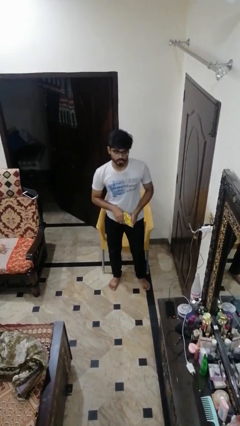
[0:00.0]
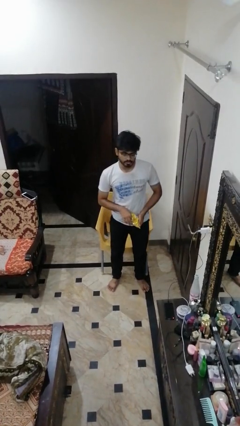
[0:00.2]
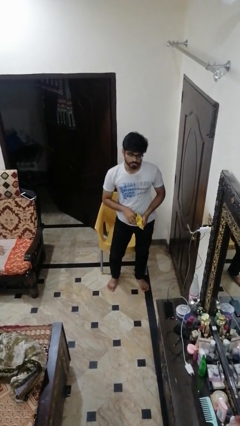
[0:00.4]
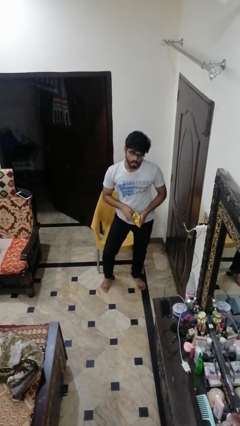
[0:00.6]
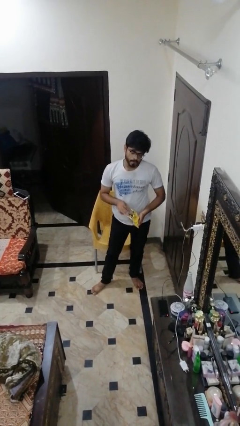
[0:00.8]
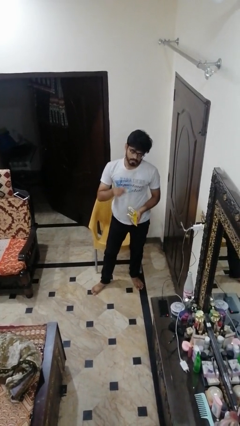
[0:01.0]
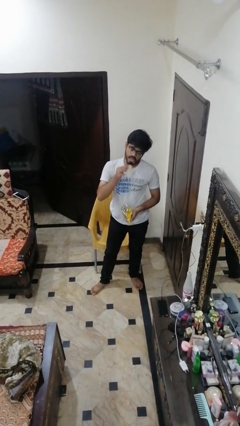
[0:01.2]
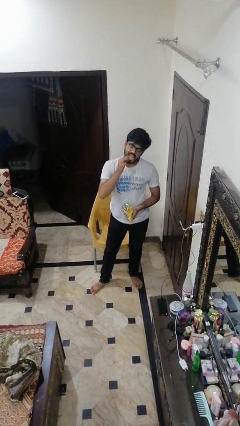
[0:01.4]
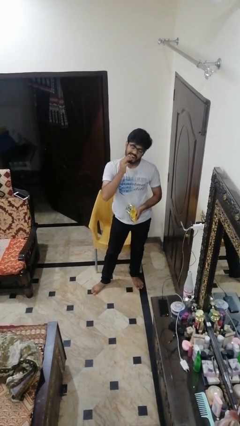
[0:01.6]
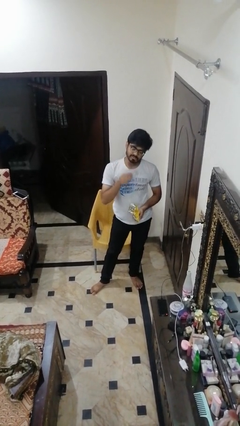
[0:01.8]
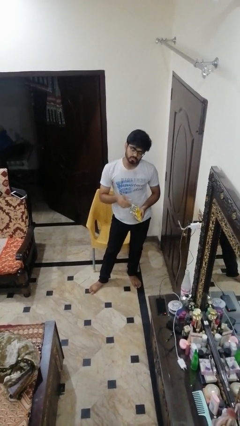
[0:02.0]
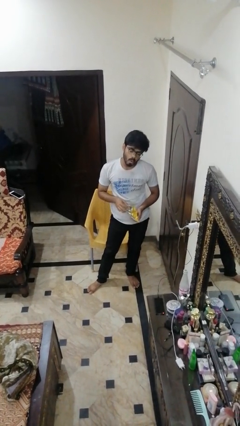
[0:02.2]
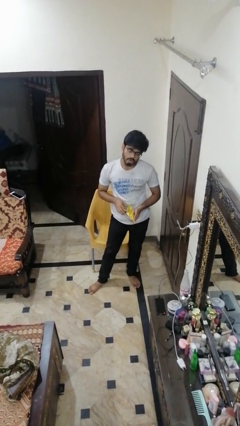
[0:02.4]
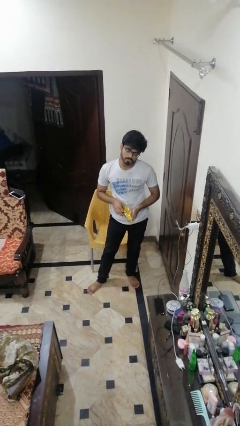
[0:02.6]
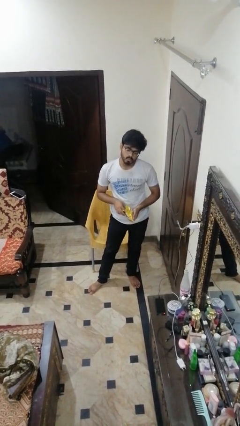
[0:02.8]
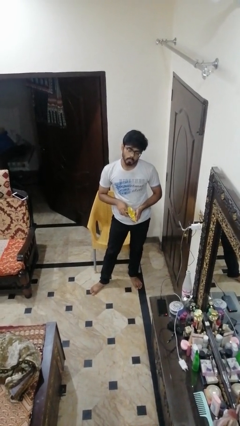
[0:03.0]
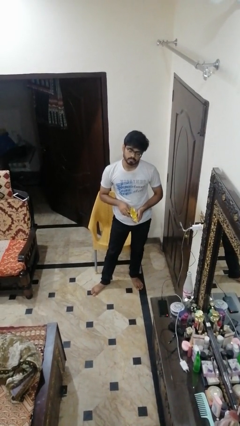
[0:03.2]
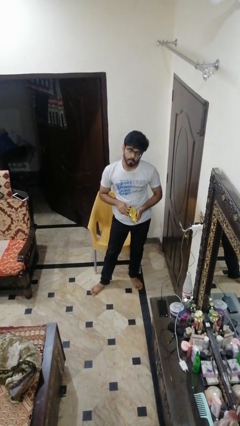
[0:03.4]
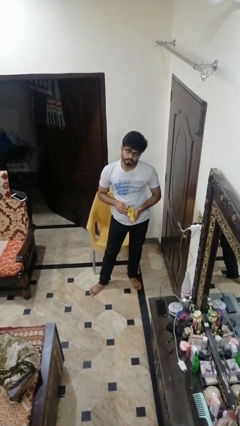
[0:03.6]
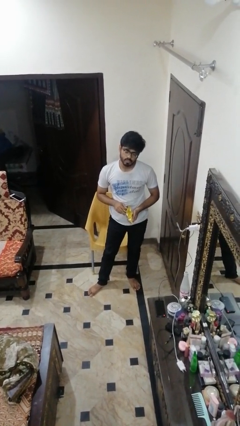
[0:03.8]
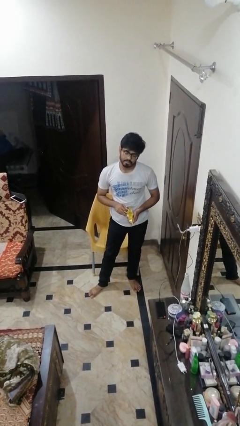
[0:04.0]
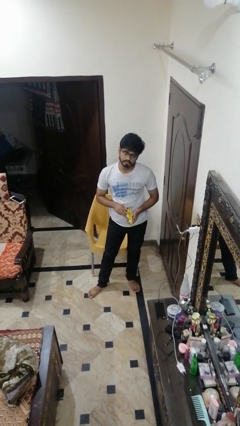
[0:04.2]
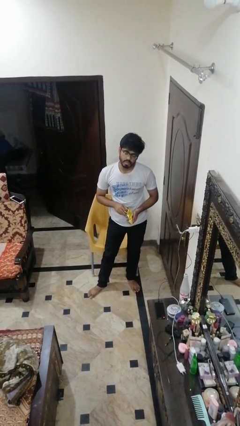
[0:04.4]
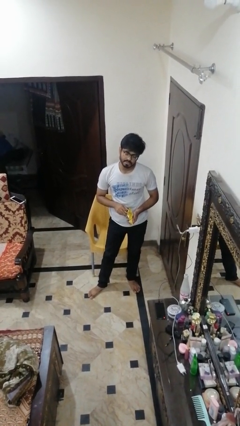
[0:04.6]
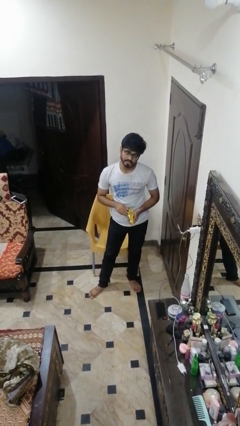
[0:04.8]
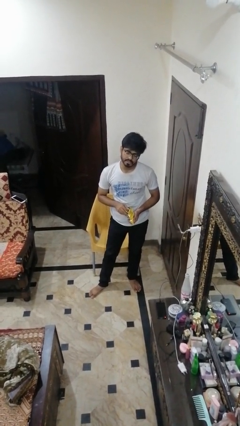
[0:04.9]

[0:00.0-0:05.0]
person eats snack from bag

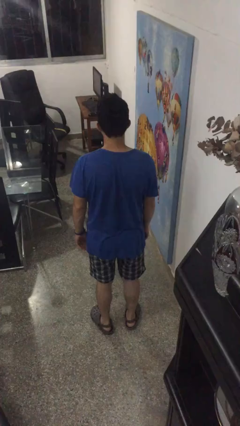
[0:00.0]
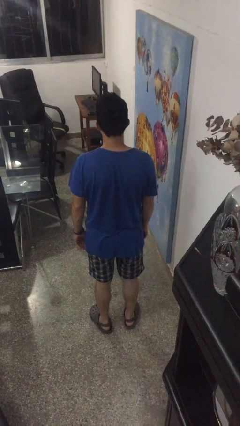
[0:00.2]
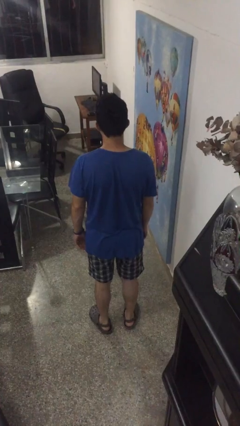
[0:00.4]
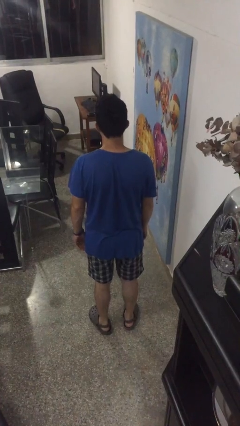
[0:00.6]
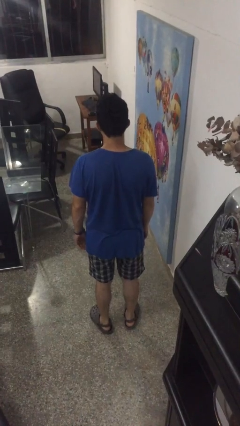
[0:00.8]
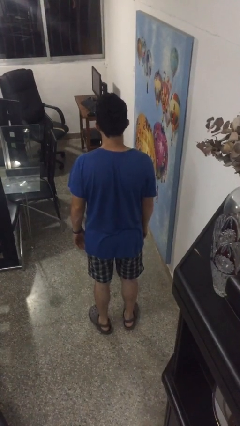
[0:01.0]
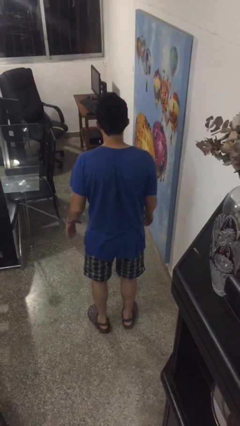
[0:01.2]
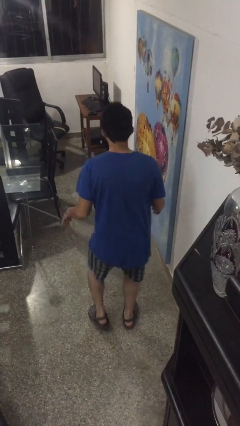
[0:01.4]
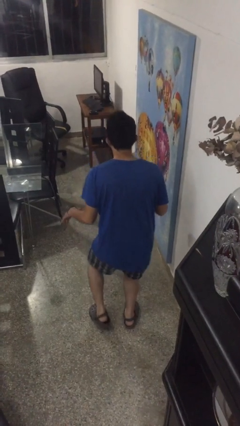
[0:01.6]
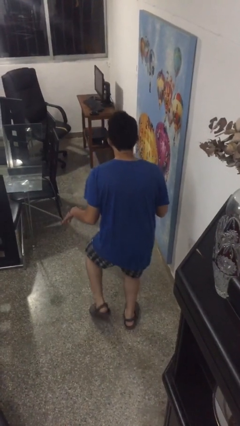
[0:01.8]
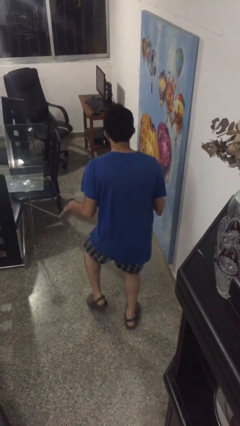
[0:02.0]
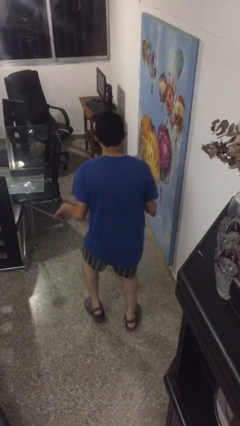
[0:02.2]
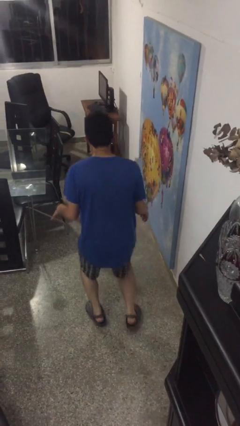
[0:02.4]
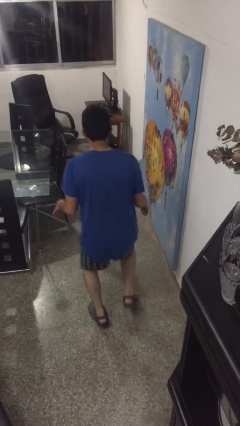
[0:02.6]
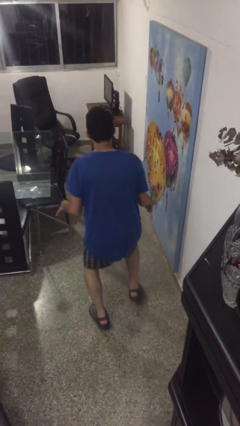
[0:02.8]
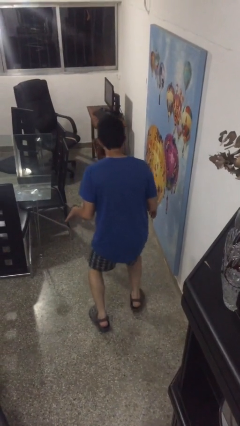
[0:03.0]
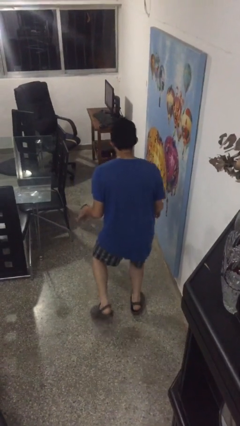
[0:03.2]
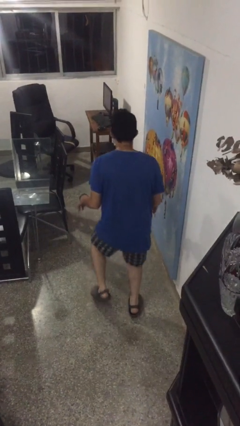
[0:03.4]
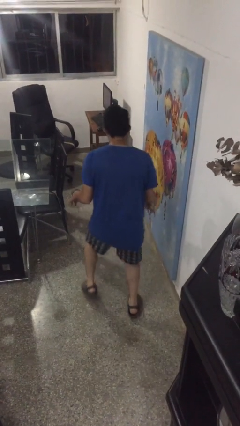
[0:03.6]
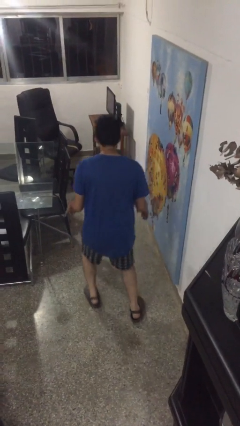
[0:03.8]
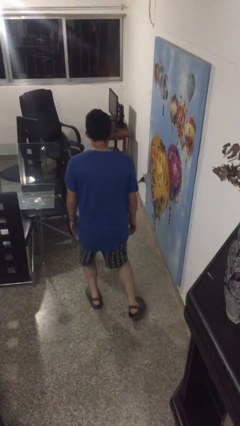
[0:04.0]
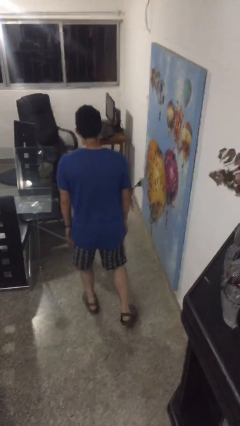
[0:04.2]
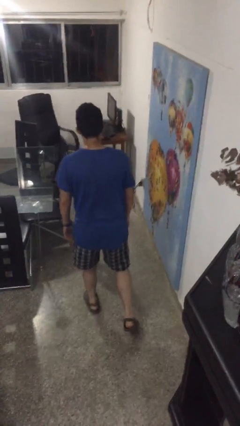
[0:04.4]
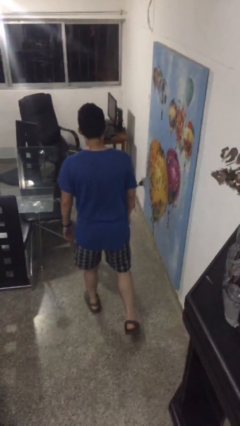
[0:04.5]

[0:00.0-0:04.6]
person walks tiptoe

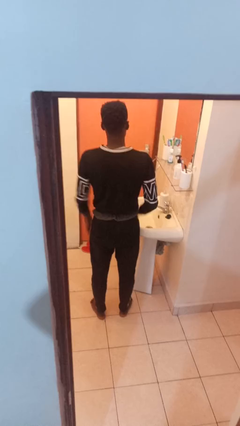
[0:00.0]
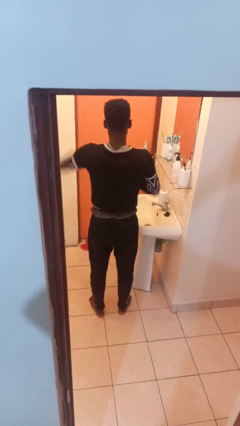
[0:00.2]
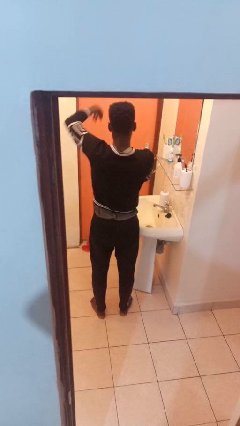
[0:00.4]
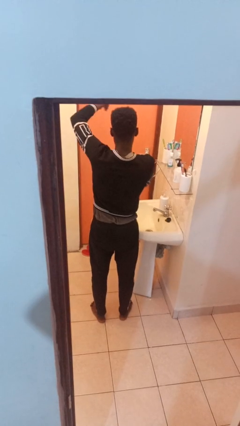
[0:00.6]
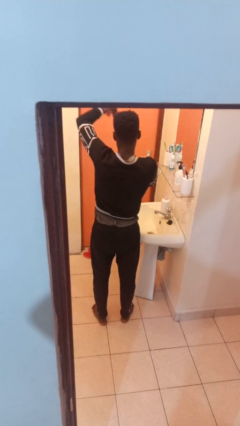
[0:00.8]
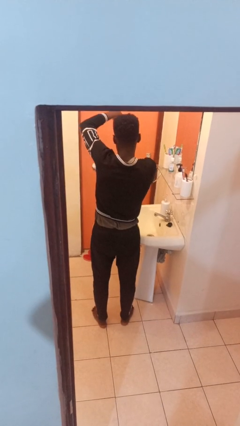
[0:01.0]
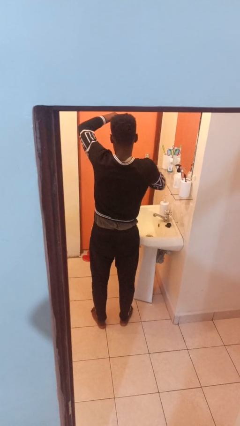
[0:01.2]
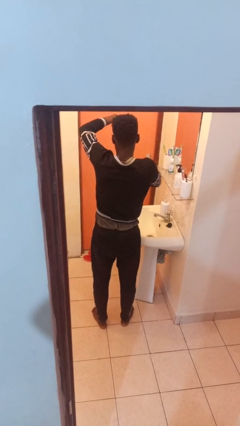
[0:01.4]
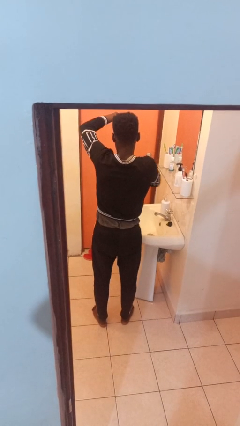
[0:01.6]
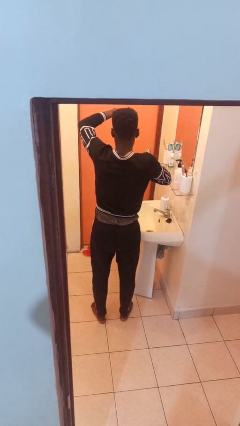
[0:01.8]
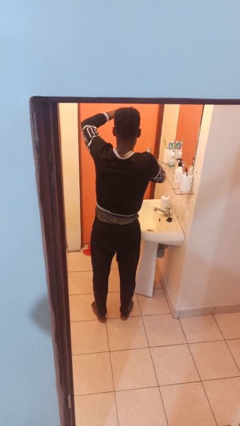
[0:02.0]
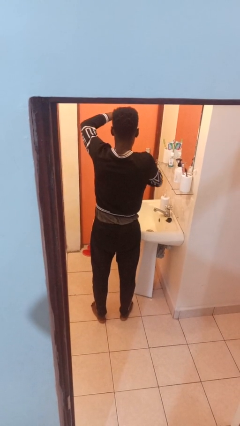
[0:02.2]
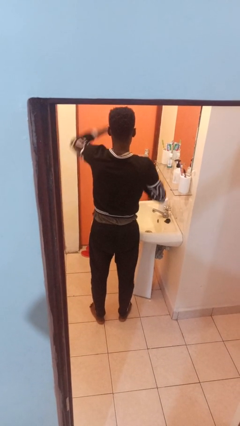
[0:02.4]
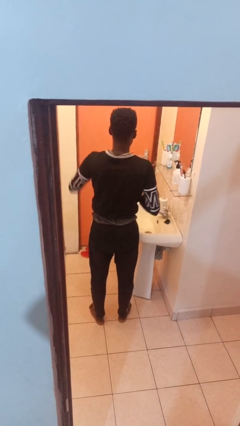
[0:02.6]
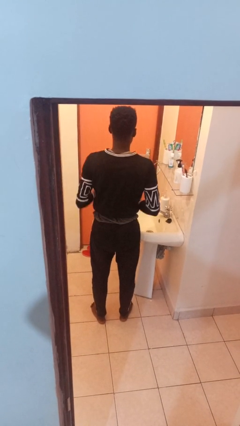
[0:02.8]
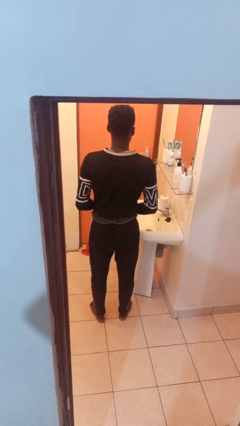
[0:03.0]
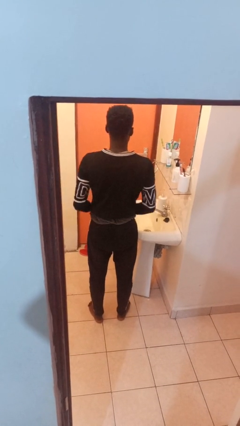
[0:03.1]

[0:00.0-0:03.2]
person applies deodorant

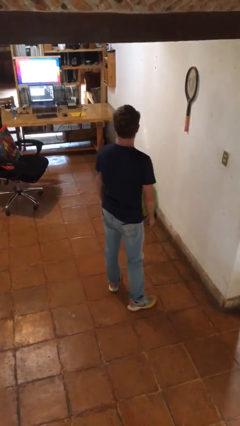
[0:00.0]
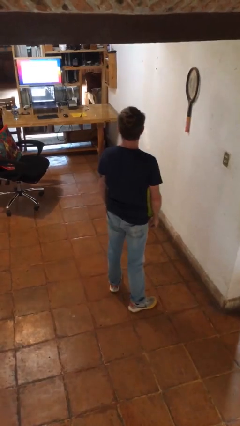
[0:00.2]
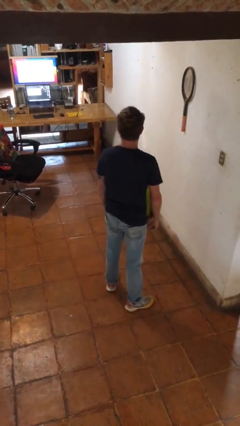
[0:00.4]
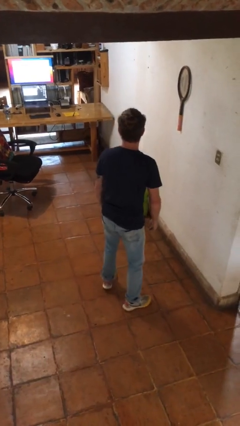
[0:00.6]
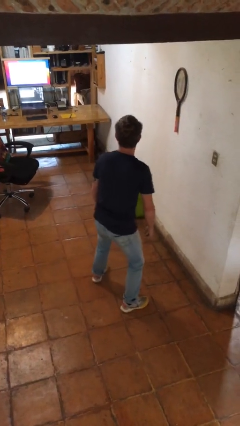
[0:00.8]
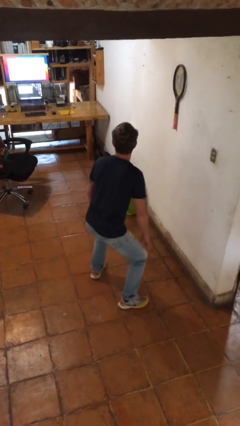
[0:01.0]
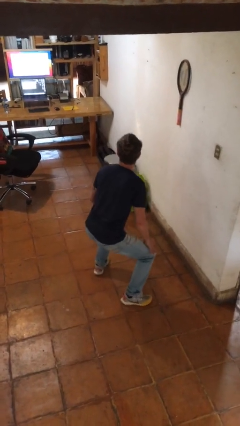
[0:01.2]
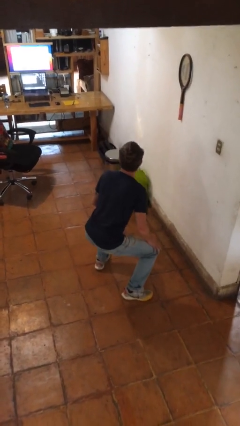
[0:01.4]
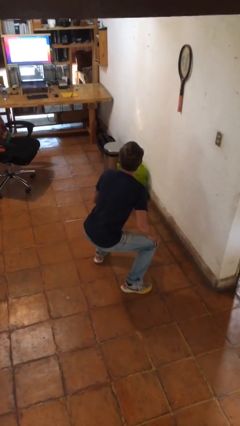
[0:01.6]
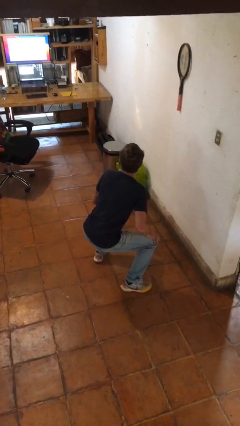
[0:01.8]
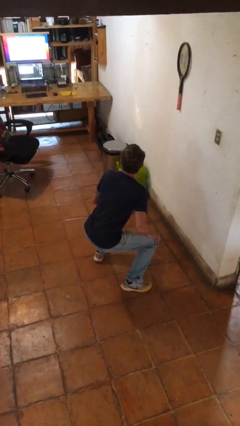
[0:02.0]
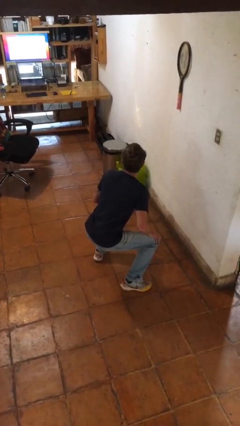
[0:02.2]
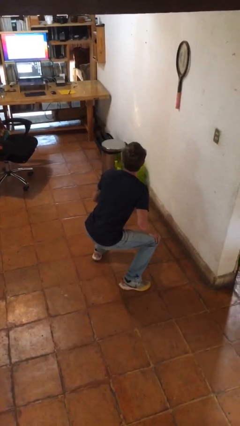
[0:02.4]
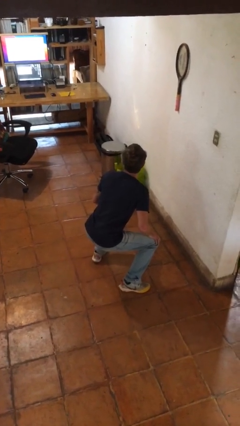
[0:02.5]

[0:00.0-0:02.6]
person squats

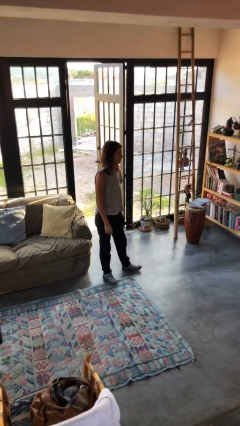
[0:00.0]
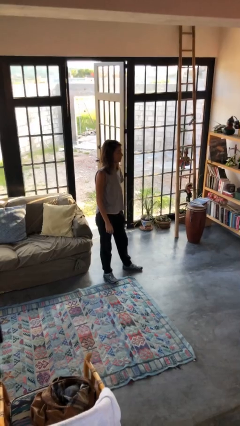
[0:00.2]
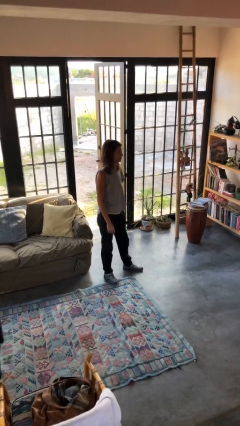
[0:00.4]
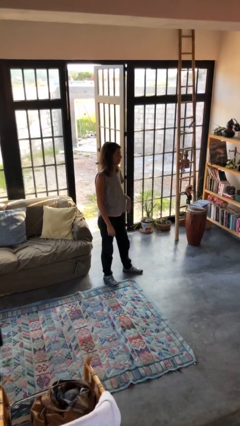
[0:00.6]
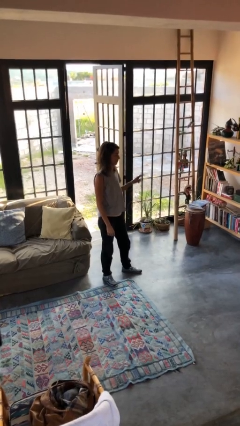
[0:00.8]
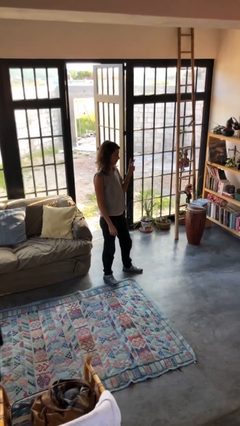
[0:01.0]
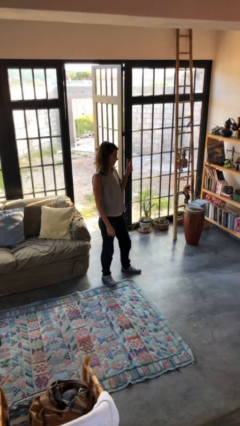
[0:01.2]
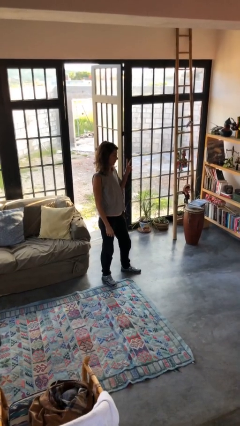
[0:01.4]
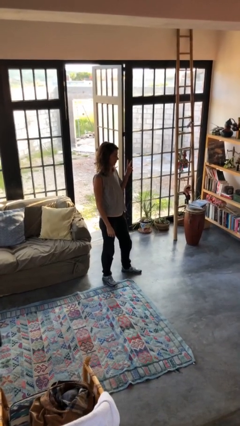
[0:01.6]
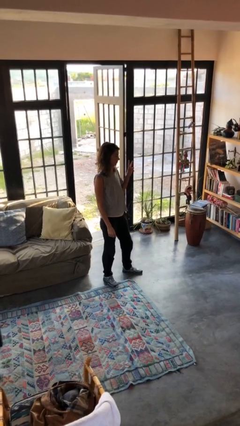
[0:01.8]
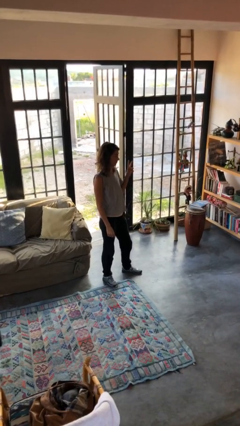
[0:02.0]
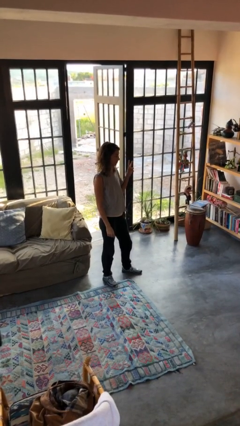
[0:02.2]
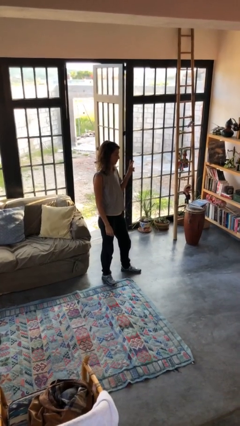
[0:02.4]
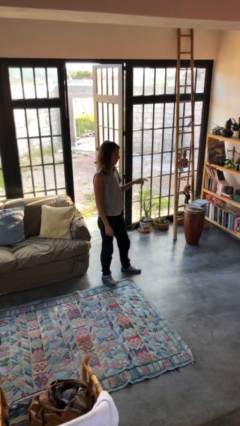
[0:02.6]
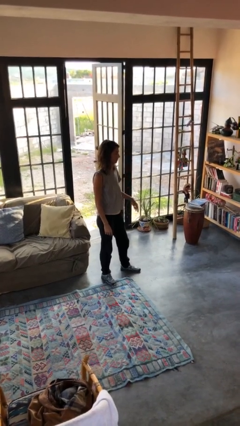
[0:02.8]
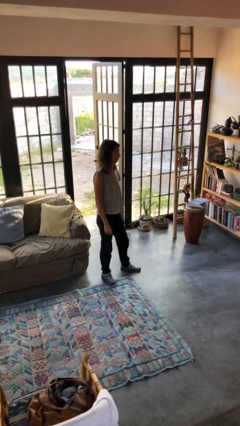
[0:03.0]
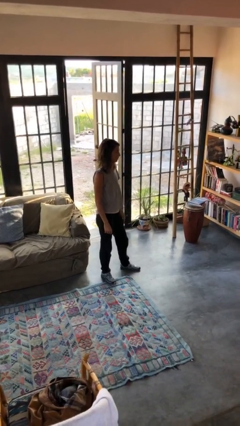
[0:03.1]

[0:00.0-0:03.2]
person gestures peace
